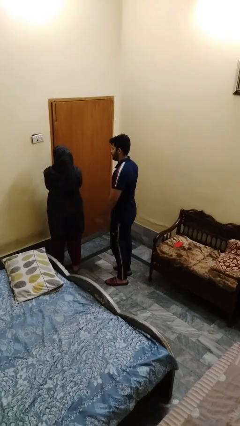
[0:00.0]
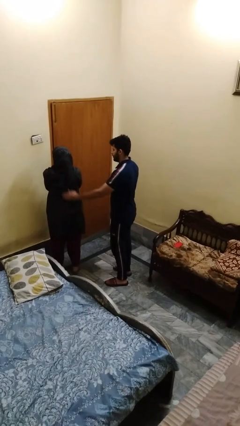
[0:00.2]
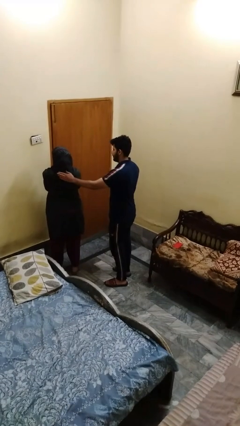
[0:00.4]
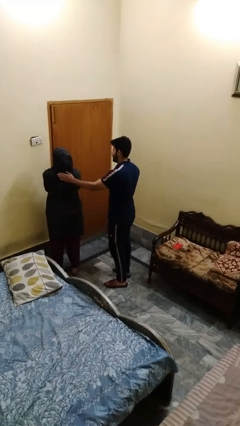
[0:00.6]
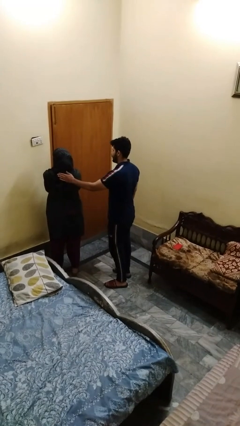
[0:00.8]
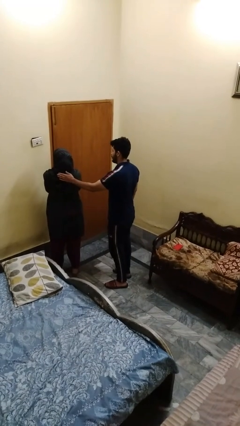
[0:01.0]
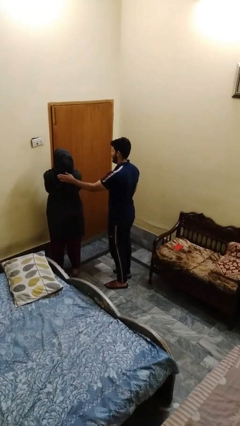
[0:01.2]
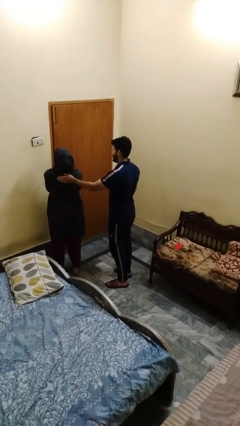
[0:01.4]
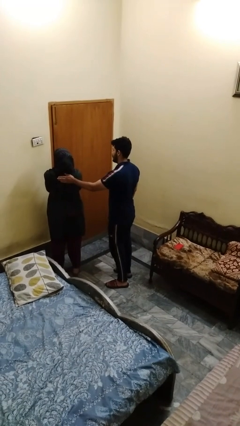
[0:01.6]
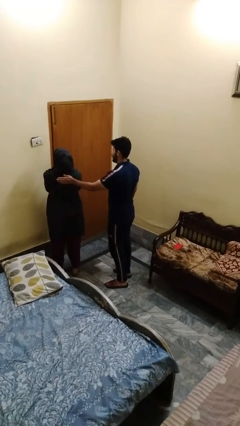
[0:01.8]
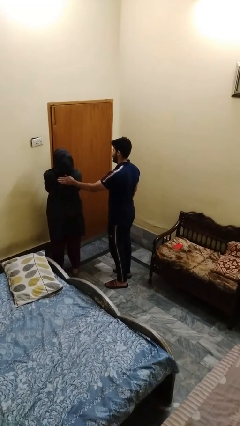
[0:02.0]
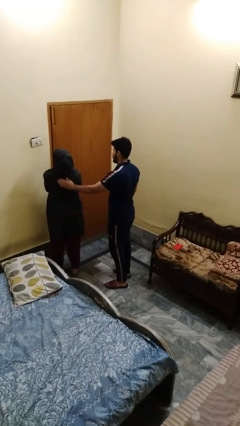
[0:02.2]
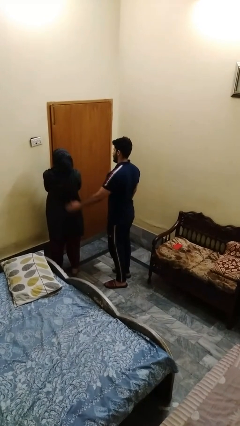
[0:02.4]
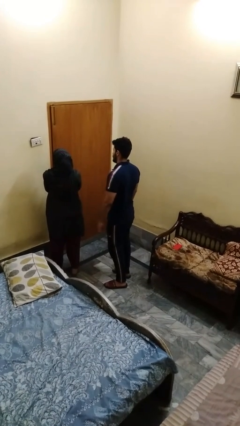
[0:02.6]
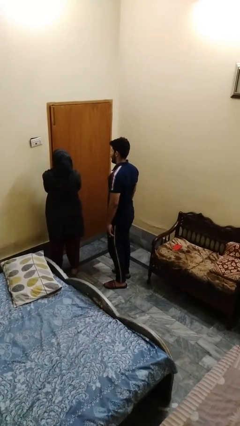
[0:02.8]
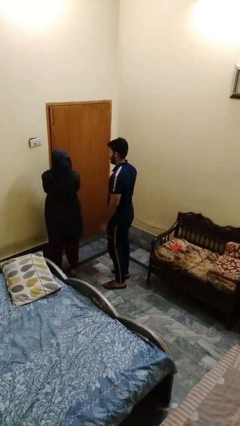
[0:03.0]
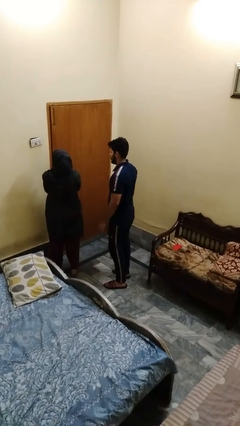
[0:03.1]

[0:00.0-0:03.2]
person touches back of person

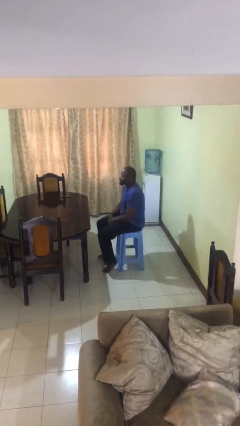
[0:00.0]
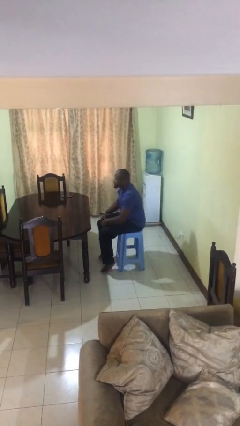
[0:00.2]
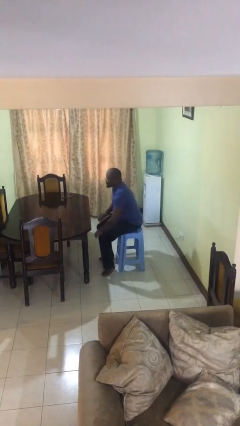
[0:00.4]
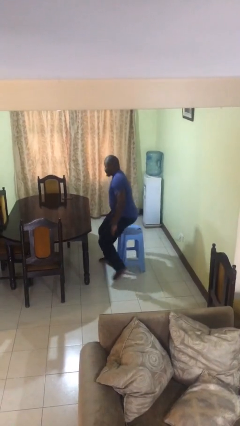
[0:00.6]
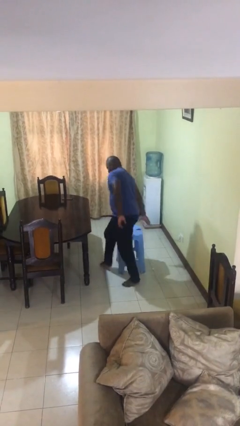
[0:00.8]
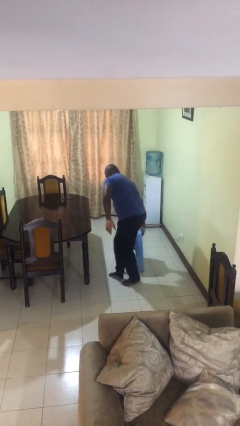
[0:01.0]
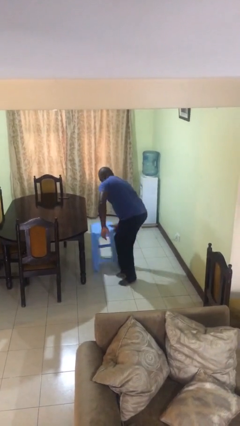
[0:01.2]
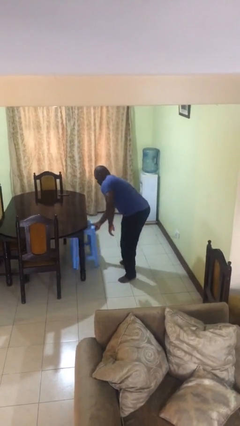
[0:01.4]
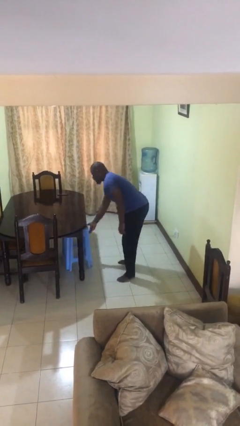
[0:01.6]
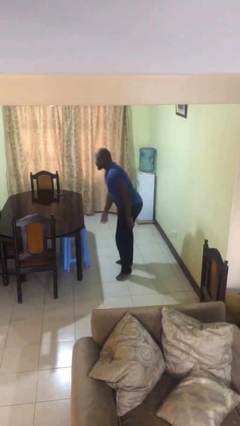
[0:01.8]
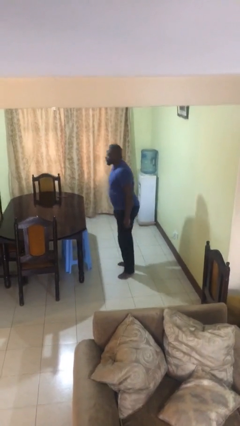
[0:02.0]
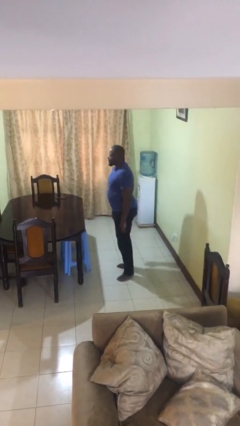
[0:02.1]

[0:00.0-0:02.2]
person stands up

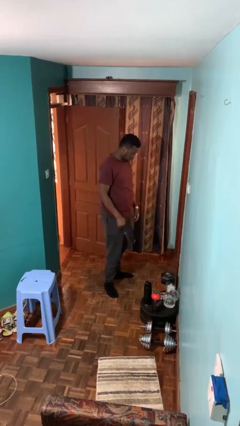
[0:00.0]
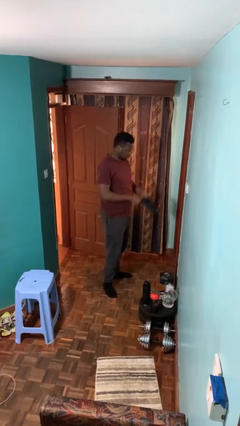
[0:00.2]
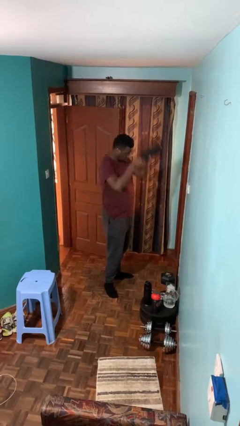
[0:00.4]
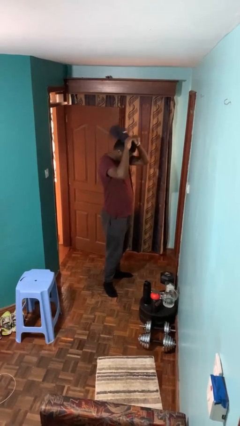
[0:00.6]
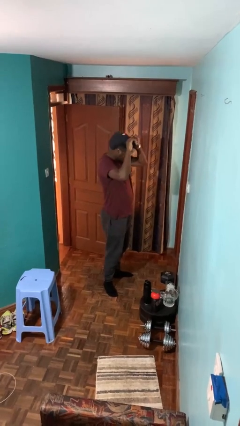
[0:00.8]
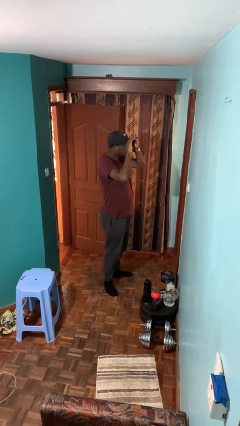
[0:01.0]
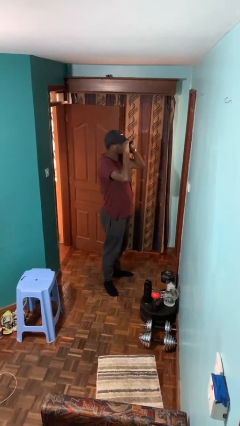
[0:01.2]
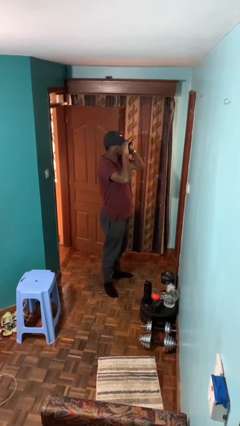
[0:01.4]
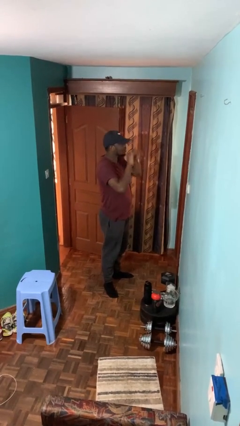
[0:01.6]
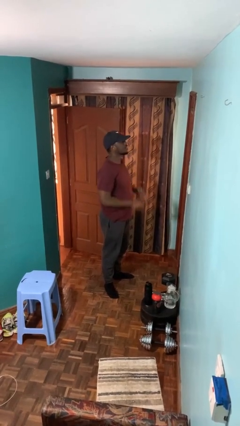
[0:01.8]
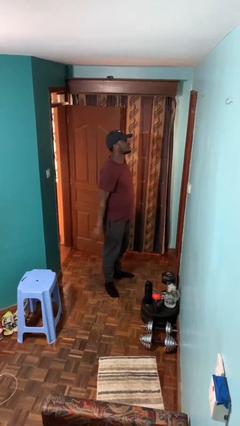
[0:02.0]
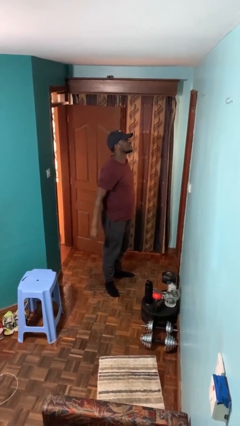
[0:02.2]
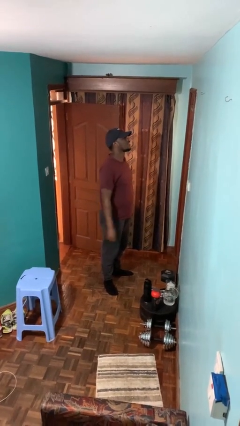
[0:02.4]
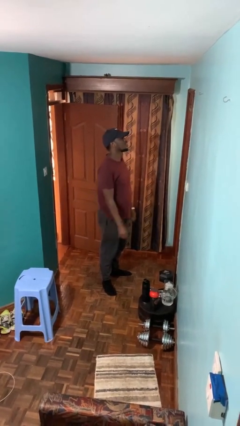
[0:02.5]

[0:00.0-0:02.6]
person puts on hat

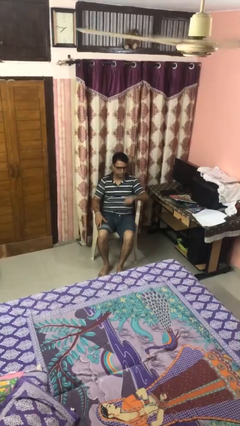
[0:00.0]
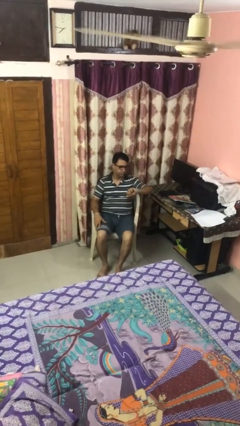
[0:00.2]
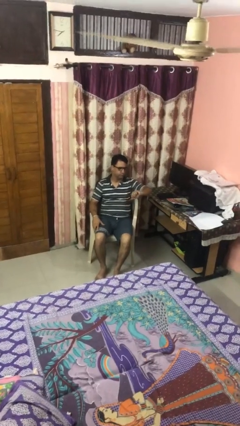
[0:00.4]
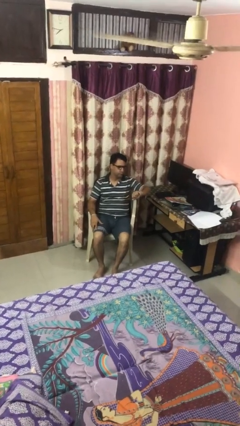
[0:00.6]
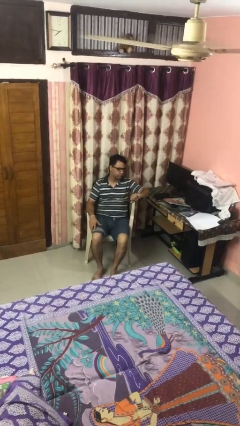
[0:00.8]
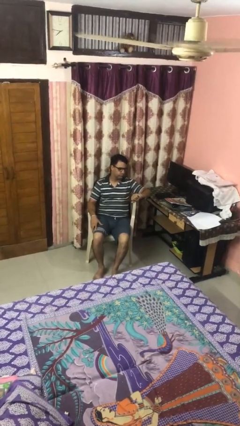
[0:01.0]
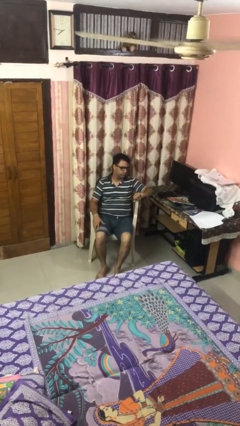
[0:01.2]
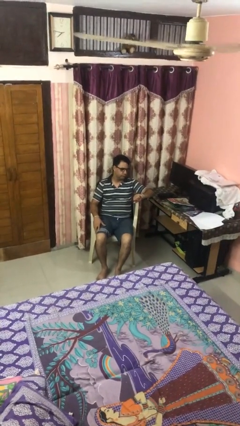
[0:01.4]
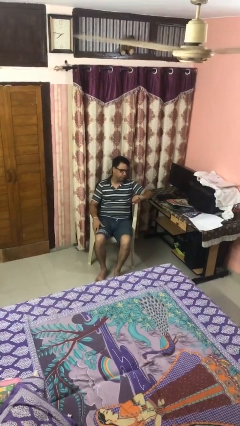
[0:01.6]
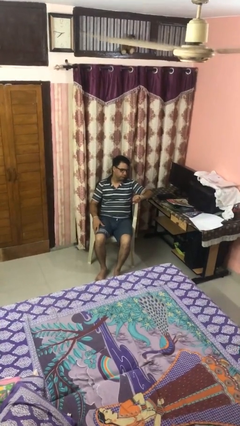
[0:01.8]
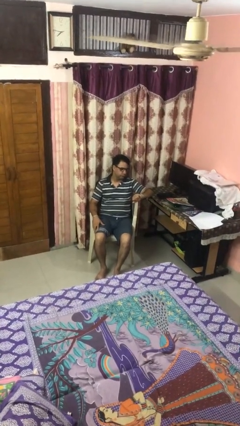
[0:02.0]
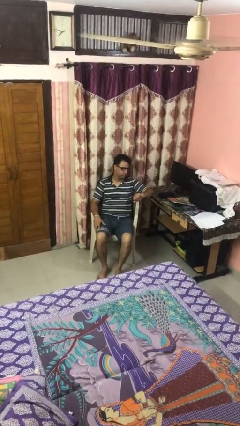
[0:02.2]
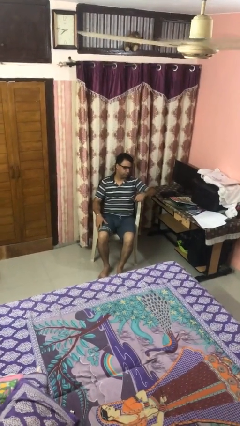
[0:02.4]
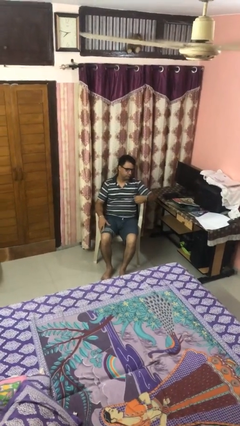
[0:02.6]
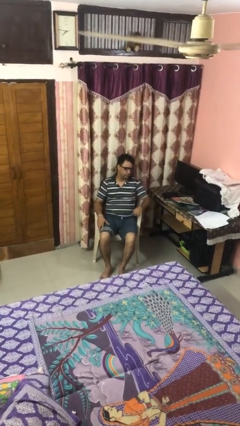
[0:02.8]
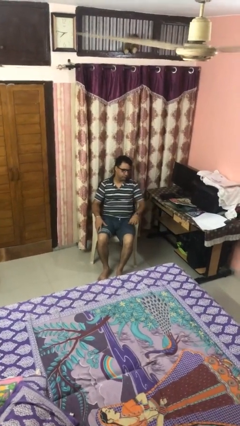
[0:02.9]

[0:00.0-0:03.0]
person looks at wristwatch

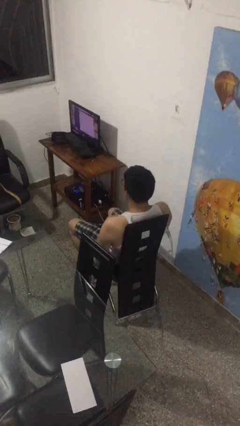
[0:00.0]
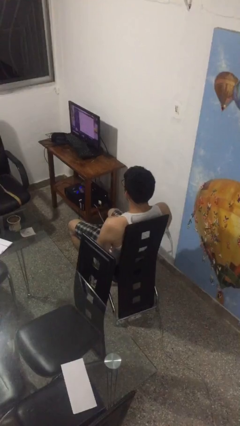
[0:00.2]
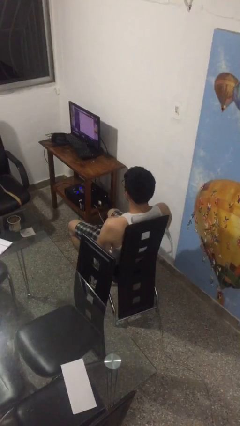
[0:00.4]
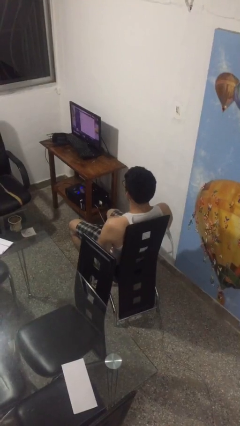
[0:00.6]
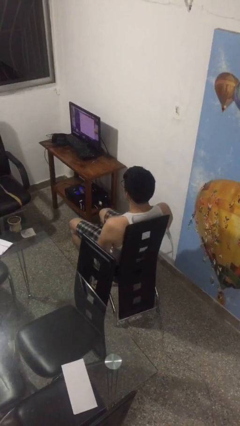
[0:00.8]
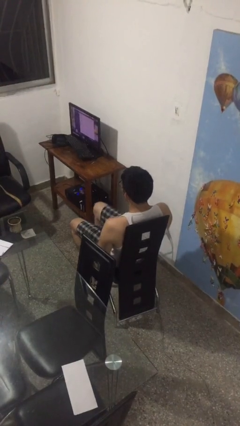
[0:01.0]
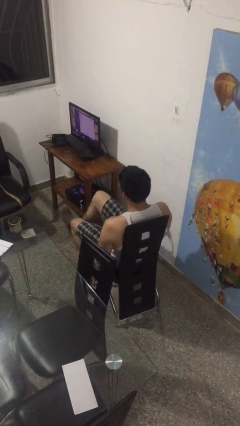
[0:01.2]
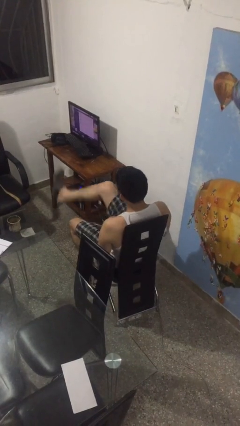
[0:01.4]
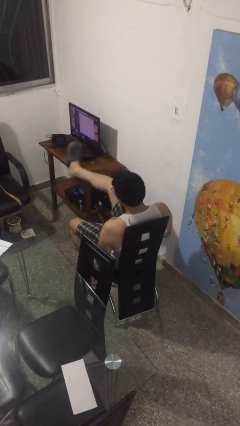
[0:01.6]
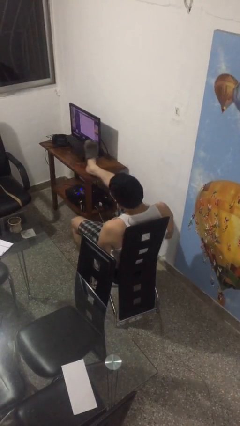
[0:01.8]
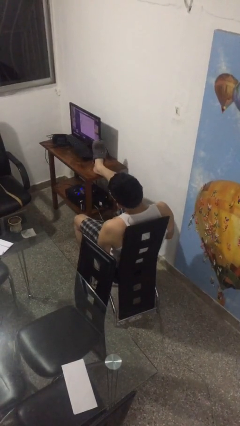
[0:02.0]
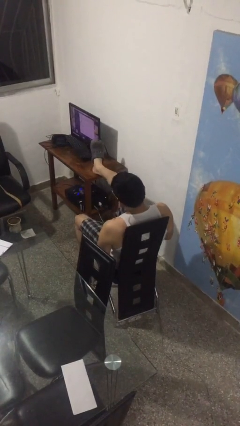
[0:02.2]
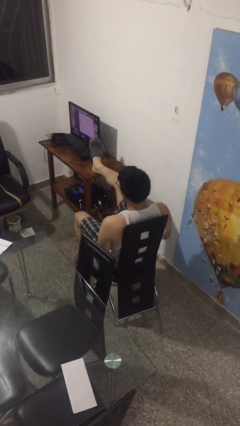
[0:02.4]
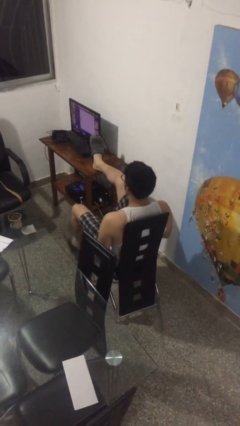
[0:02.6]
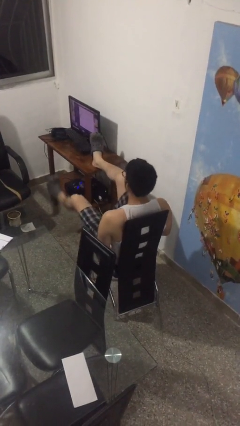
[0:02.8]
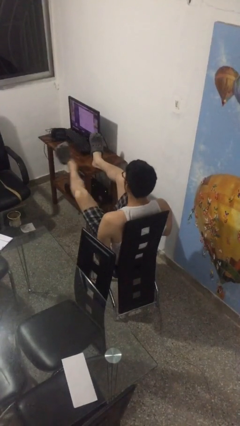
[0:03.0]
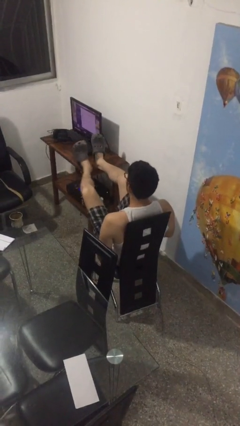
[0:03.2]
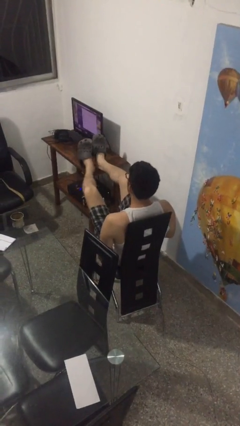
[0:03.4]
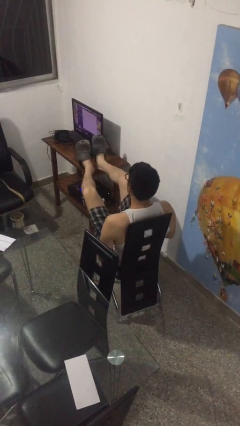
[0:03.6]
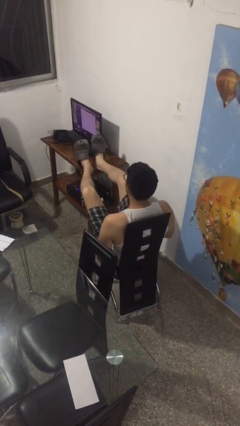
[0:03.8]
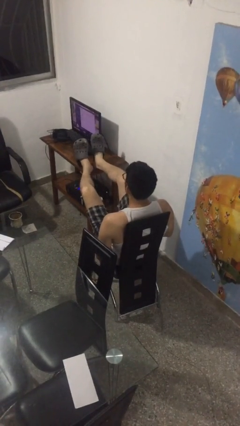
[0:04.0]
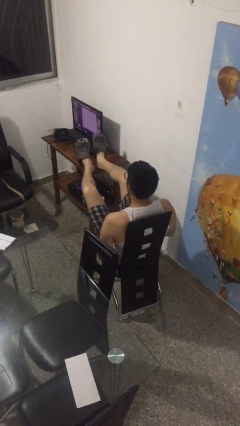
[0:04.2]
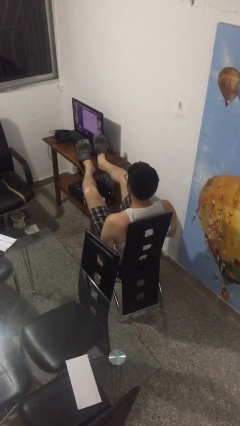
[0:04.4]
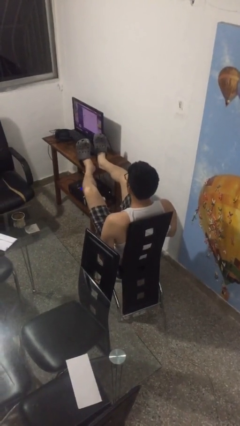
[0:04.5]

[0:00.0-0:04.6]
person puts feet up

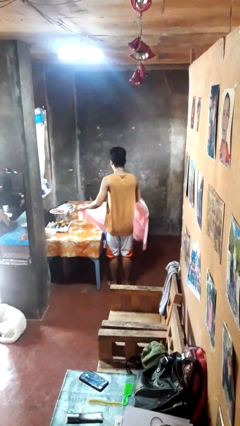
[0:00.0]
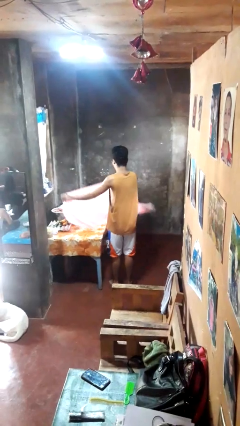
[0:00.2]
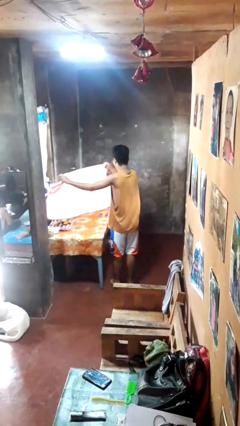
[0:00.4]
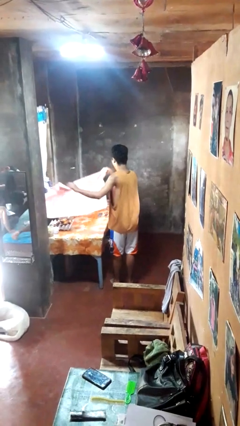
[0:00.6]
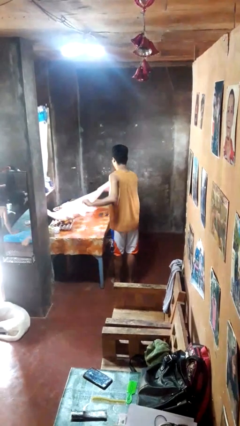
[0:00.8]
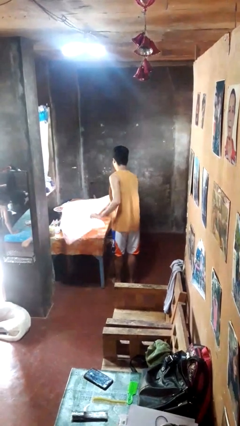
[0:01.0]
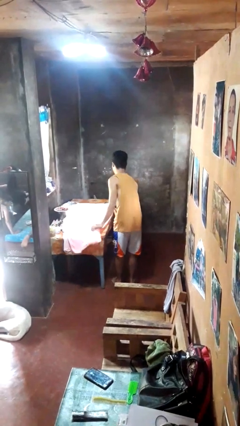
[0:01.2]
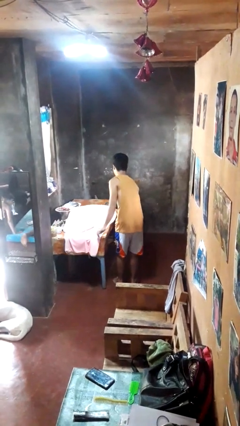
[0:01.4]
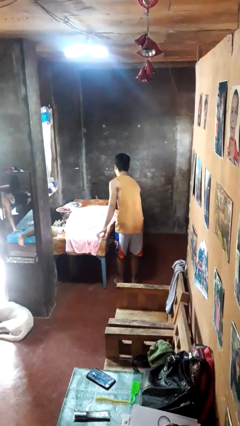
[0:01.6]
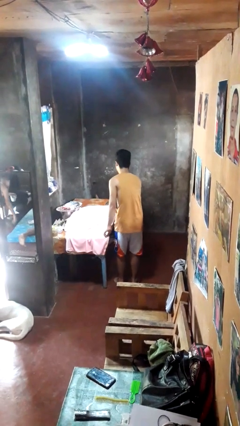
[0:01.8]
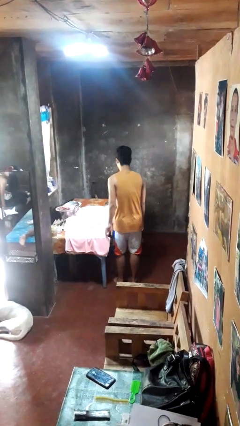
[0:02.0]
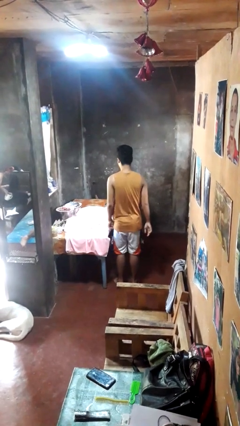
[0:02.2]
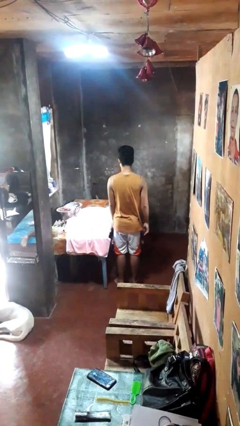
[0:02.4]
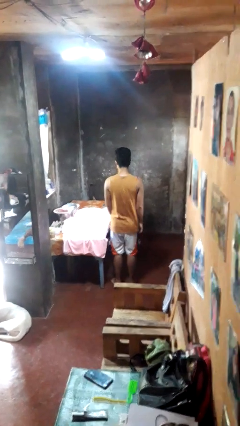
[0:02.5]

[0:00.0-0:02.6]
person spreads tablecloth
